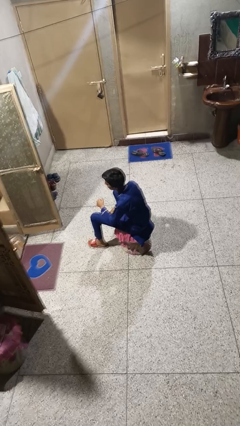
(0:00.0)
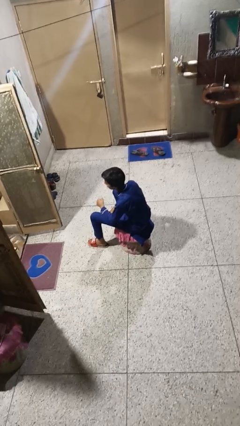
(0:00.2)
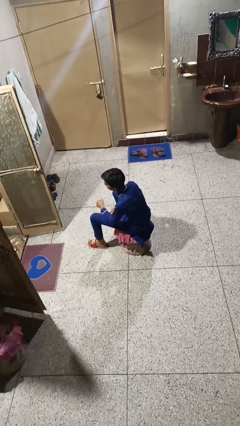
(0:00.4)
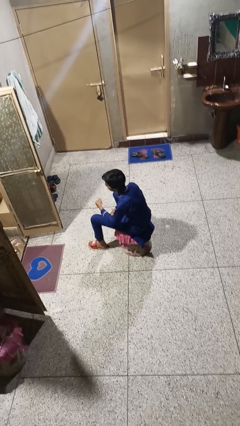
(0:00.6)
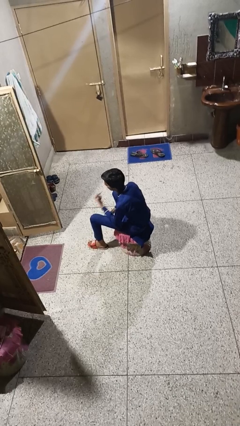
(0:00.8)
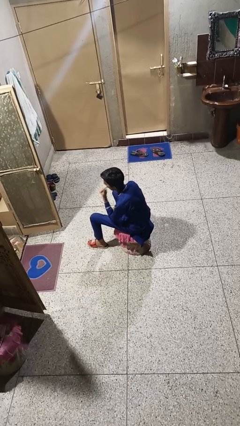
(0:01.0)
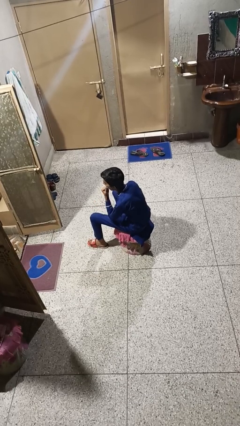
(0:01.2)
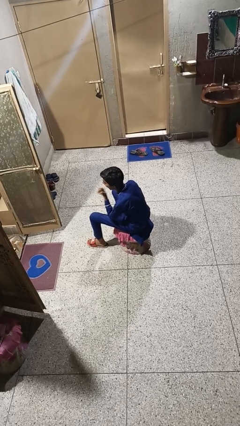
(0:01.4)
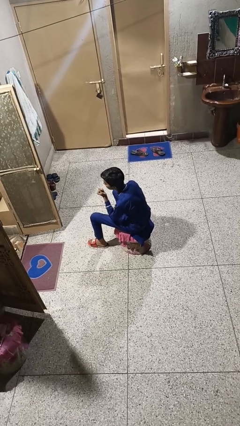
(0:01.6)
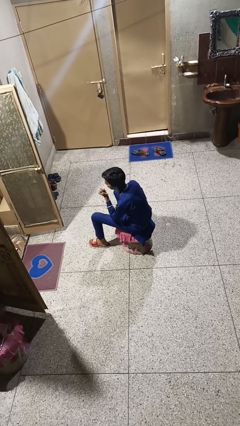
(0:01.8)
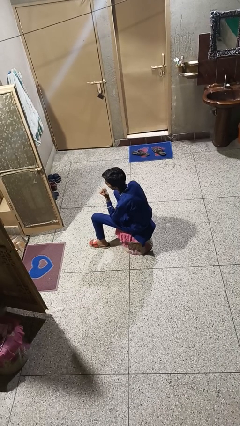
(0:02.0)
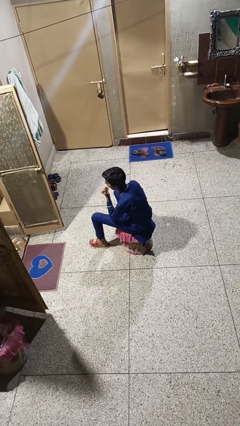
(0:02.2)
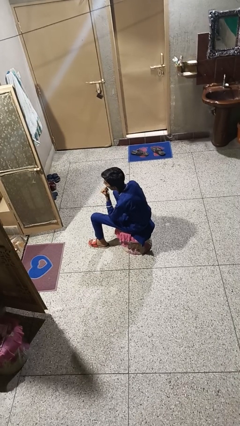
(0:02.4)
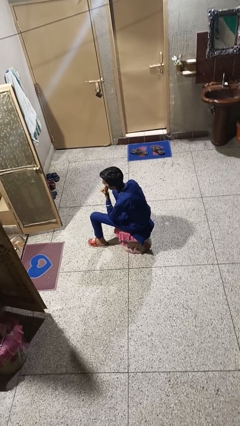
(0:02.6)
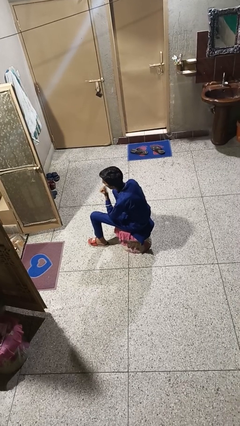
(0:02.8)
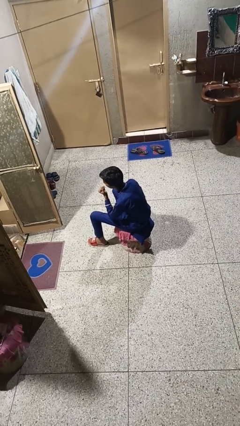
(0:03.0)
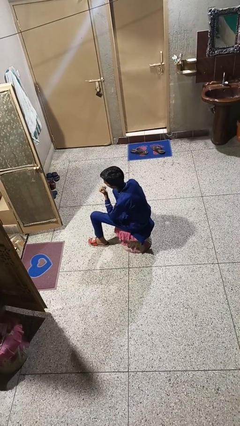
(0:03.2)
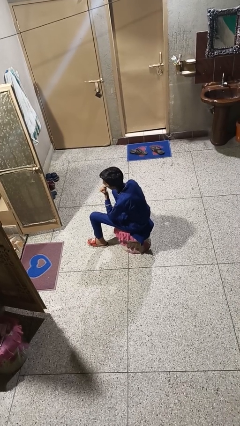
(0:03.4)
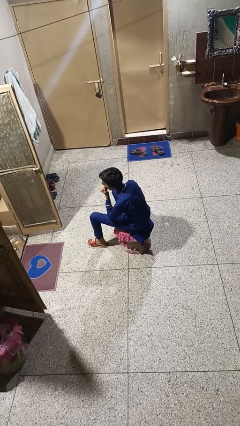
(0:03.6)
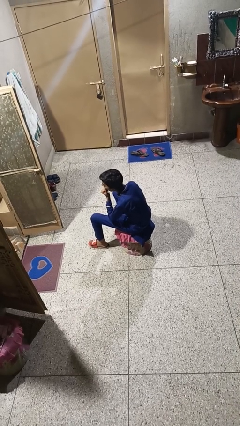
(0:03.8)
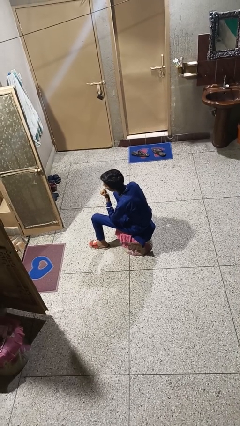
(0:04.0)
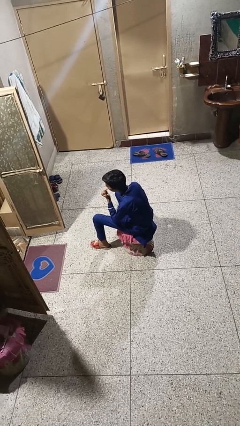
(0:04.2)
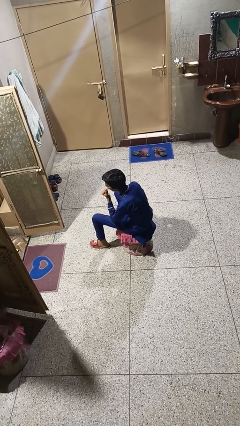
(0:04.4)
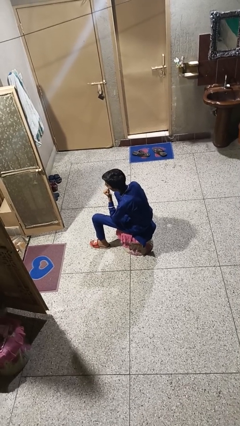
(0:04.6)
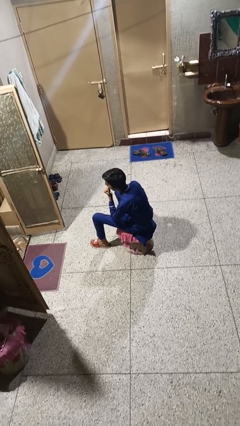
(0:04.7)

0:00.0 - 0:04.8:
person licks fingers

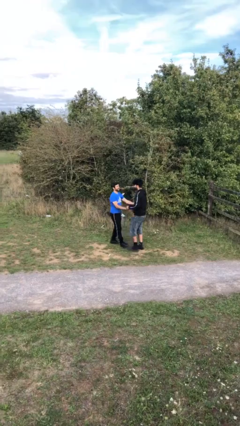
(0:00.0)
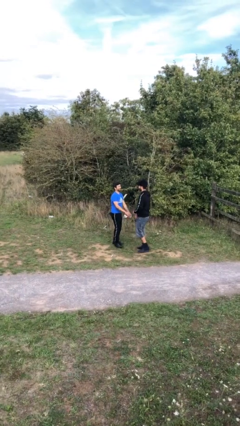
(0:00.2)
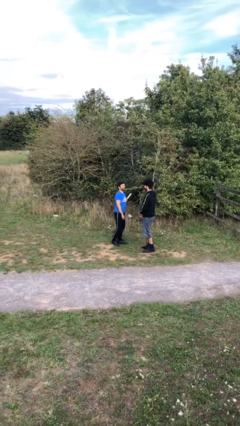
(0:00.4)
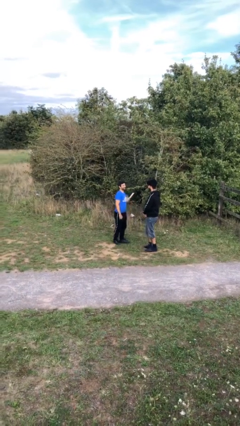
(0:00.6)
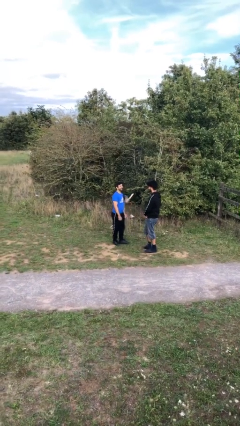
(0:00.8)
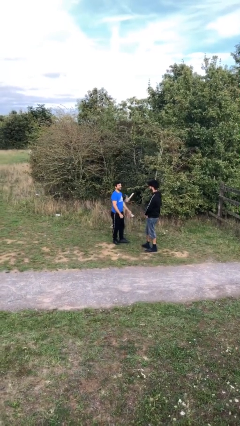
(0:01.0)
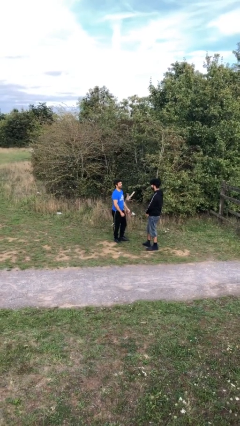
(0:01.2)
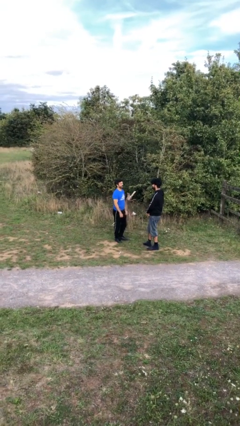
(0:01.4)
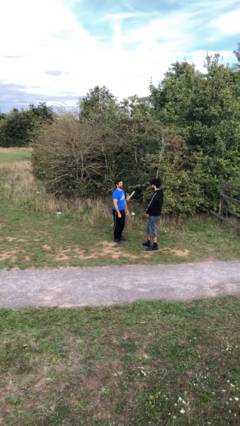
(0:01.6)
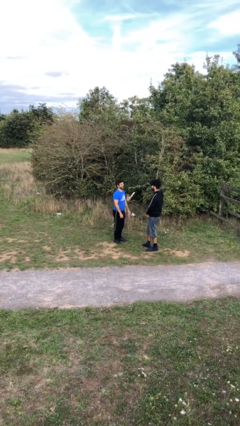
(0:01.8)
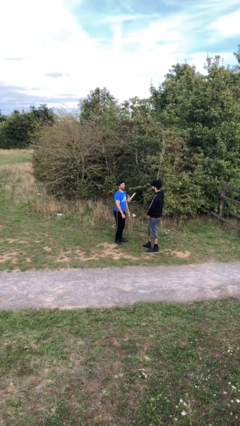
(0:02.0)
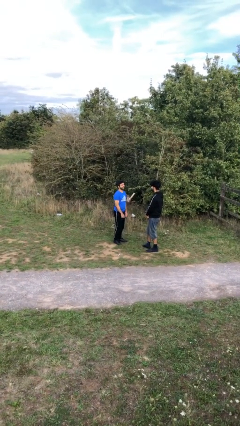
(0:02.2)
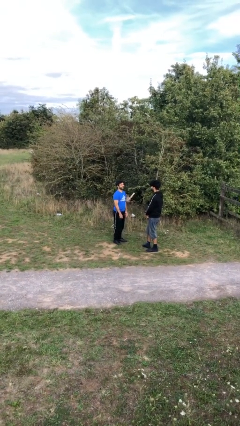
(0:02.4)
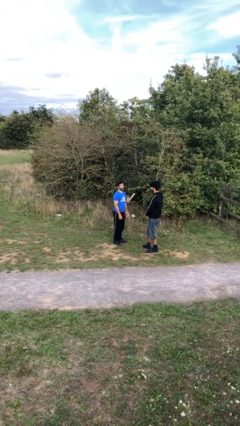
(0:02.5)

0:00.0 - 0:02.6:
person talks to person

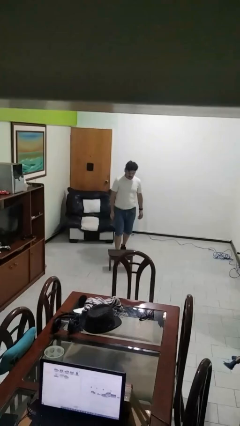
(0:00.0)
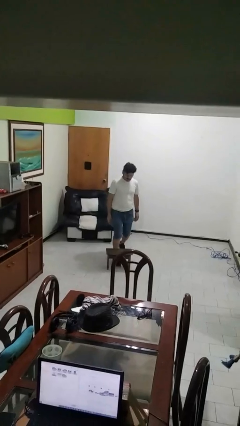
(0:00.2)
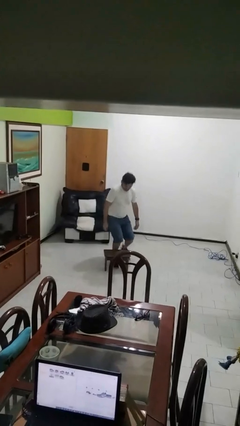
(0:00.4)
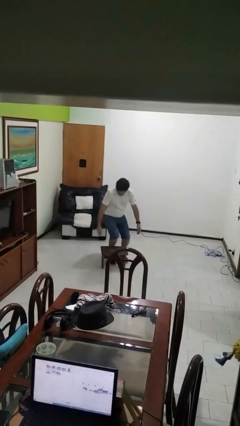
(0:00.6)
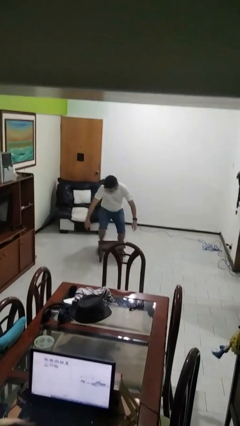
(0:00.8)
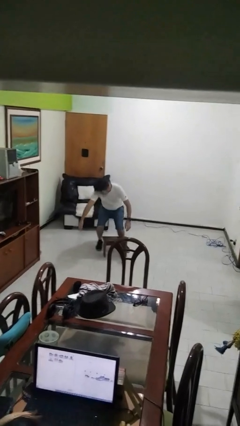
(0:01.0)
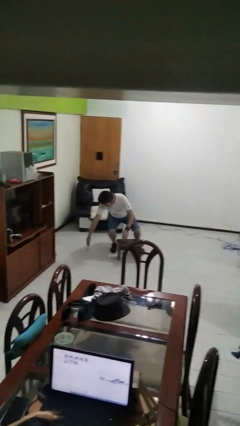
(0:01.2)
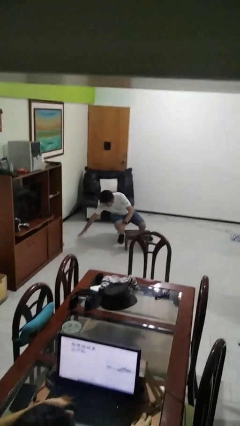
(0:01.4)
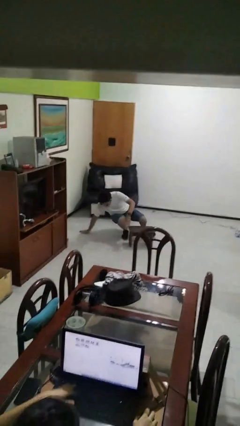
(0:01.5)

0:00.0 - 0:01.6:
person trips on object on floor

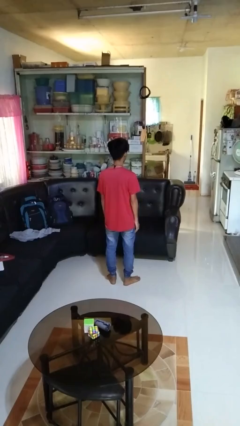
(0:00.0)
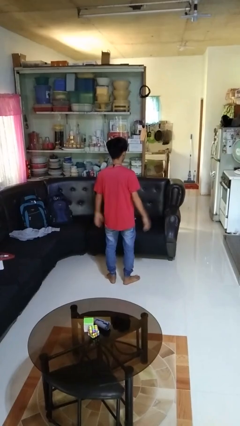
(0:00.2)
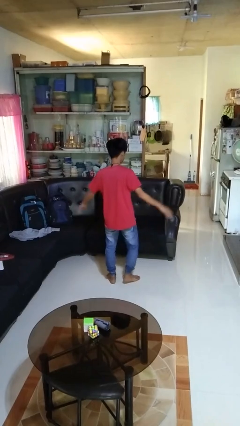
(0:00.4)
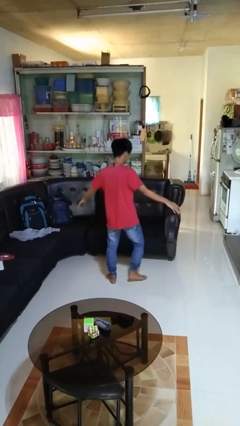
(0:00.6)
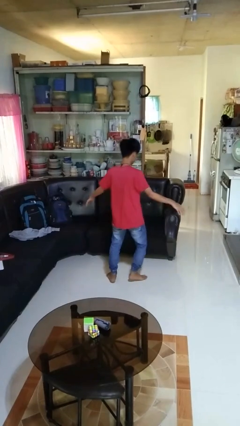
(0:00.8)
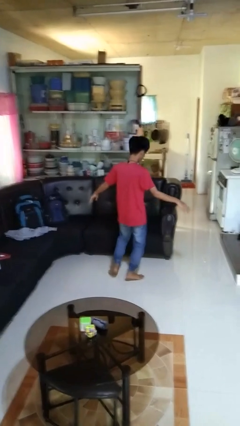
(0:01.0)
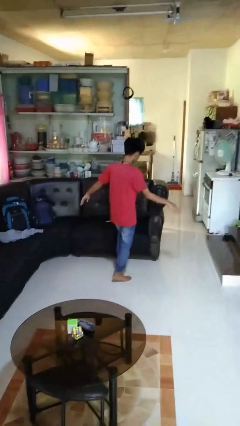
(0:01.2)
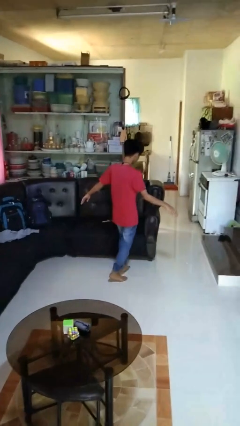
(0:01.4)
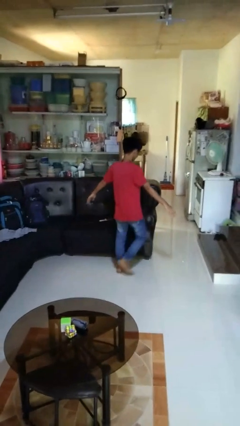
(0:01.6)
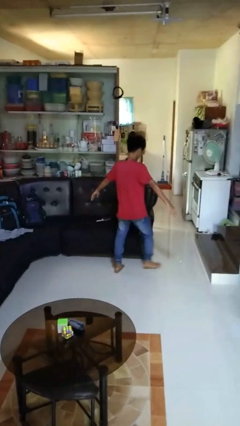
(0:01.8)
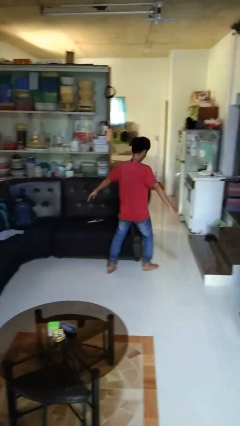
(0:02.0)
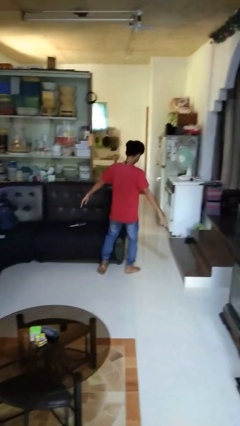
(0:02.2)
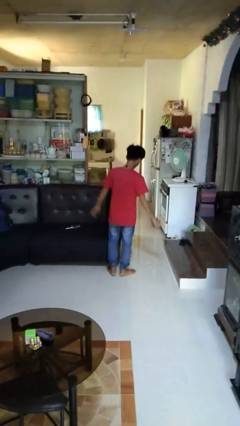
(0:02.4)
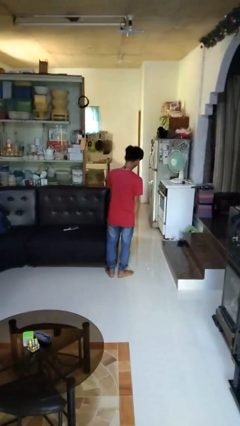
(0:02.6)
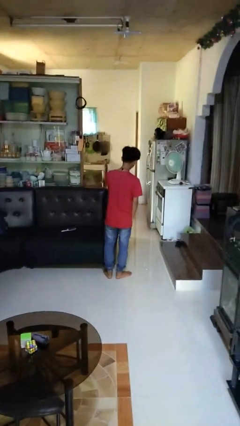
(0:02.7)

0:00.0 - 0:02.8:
person walks tiptoe

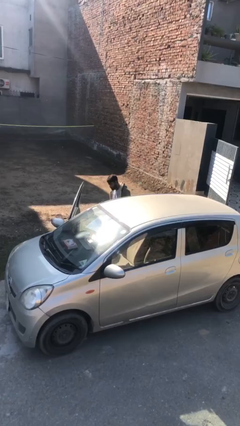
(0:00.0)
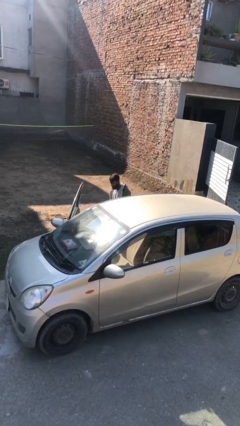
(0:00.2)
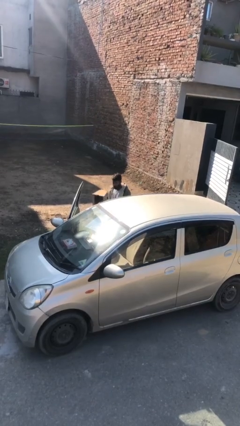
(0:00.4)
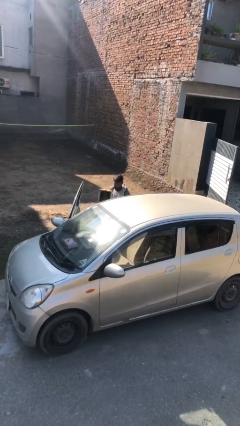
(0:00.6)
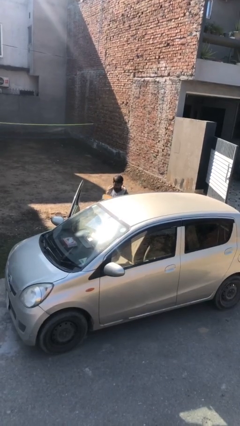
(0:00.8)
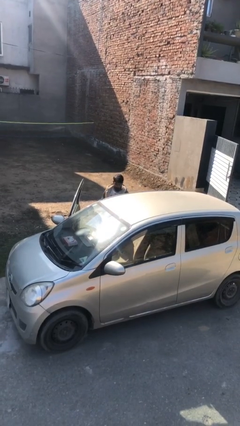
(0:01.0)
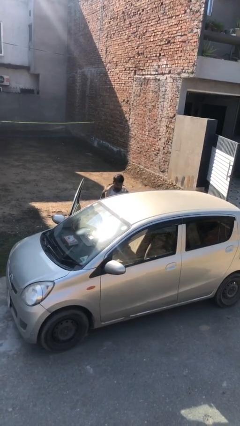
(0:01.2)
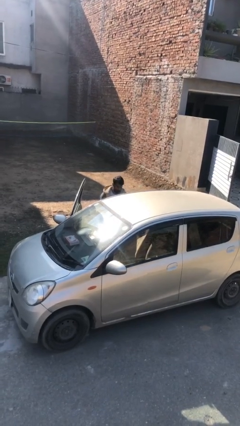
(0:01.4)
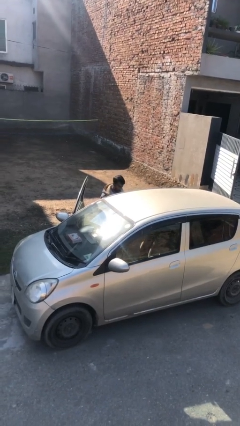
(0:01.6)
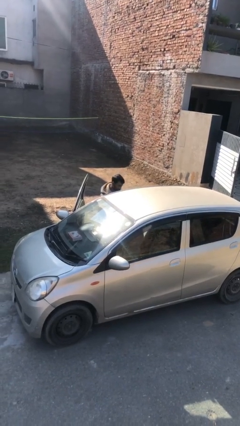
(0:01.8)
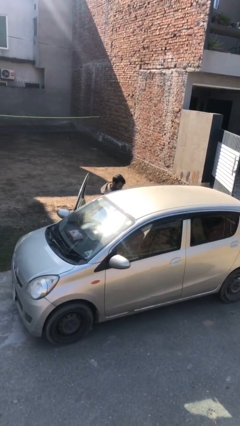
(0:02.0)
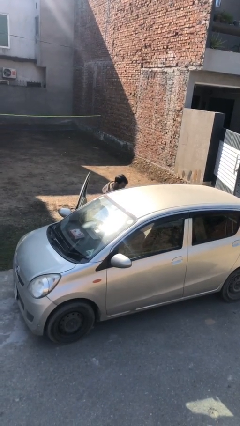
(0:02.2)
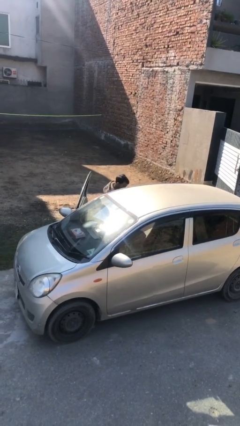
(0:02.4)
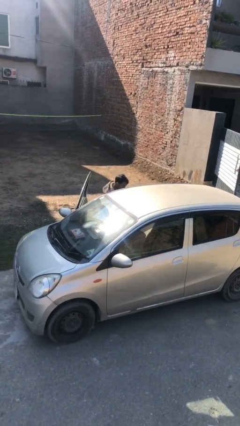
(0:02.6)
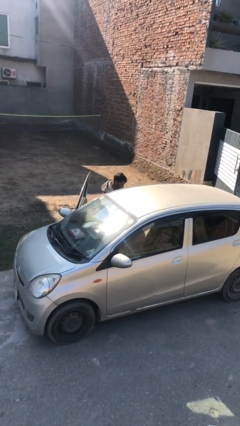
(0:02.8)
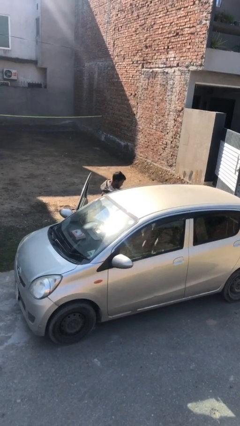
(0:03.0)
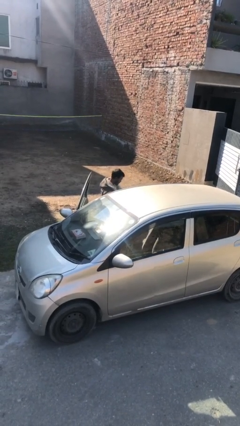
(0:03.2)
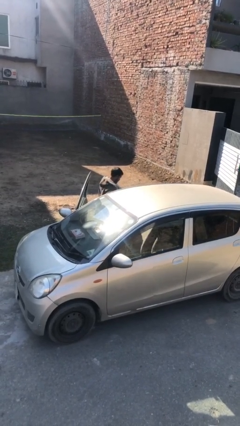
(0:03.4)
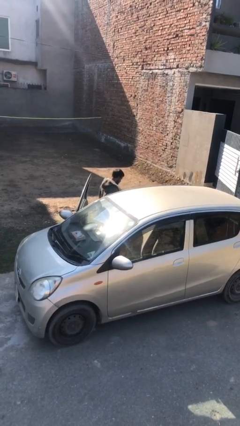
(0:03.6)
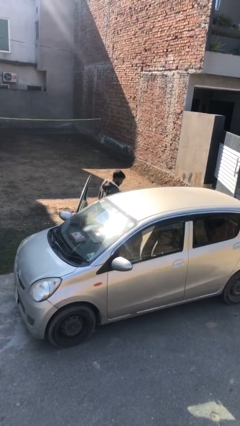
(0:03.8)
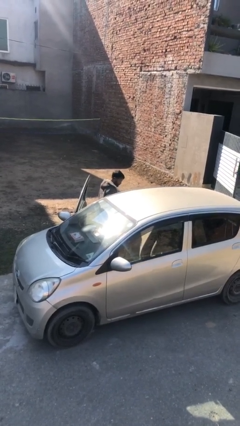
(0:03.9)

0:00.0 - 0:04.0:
person loads car

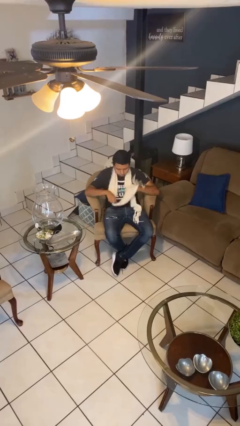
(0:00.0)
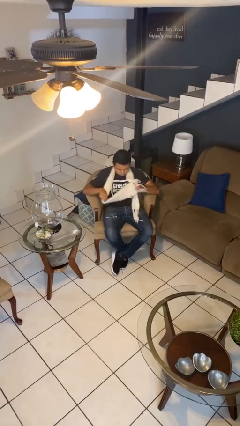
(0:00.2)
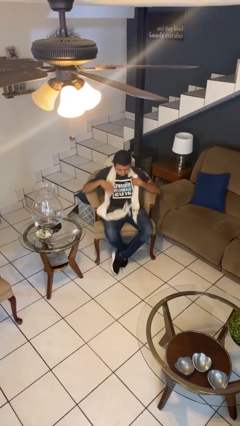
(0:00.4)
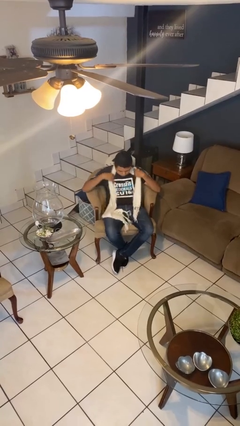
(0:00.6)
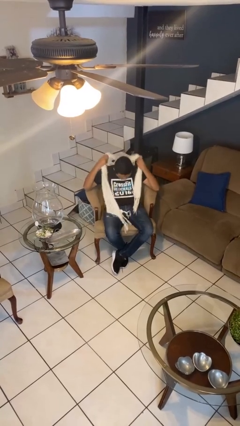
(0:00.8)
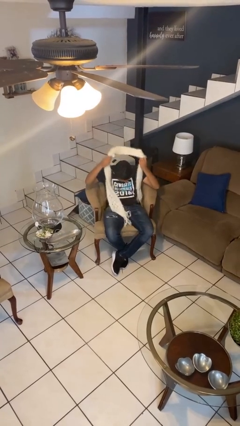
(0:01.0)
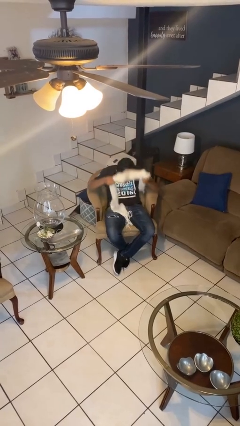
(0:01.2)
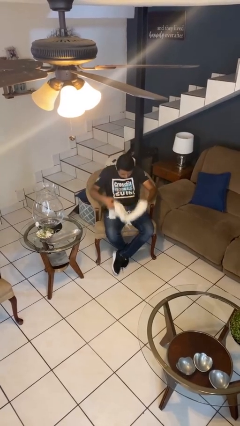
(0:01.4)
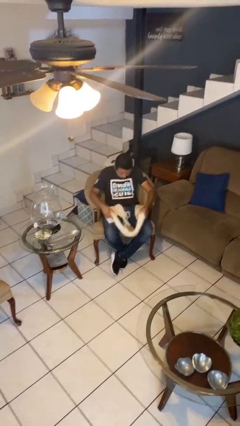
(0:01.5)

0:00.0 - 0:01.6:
person takes off scarf
